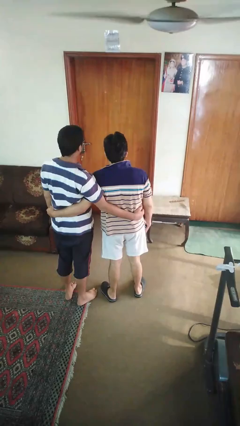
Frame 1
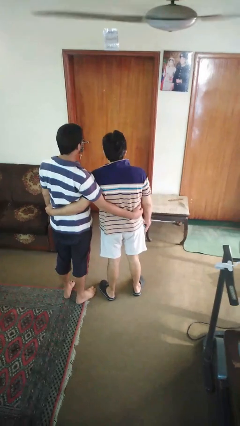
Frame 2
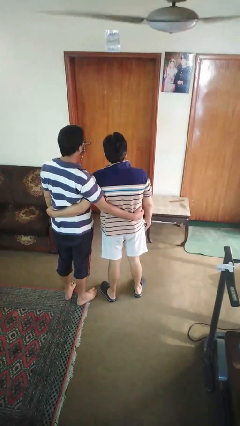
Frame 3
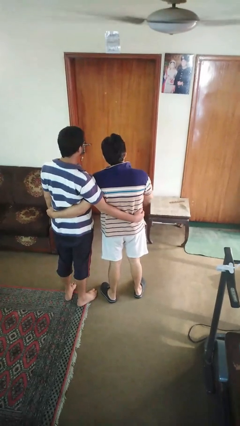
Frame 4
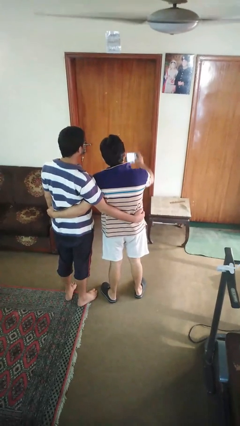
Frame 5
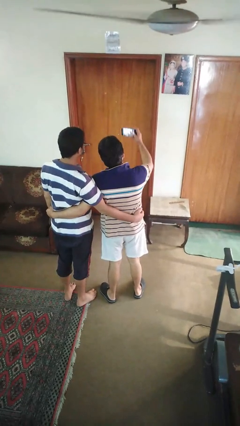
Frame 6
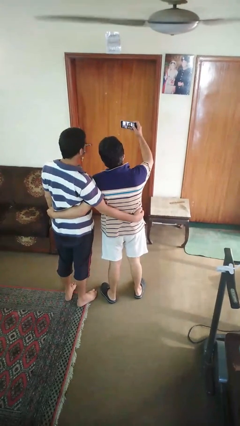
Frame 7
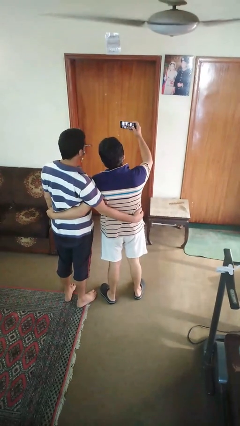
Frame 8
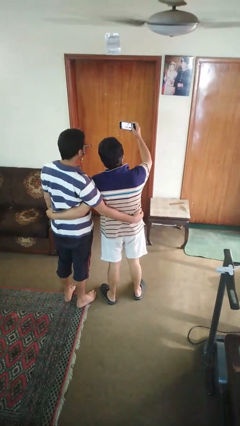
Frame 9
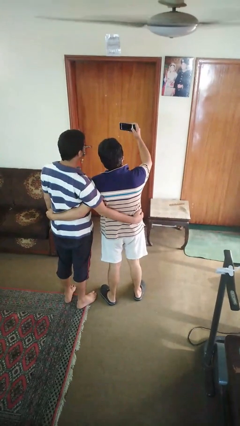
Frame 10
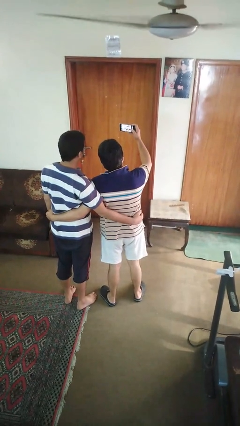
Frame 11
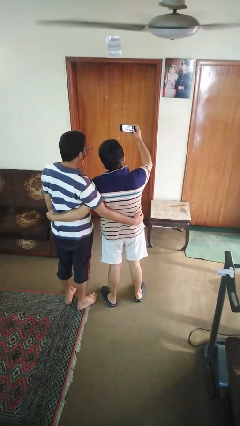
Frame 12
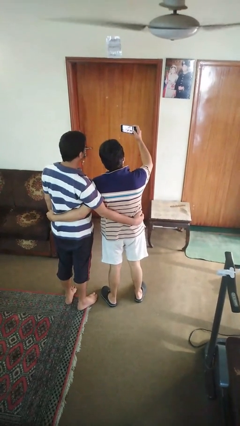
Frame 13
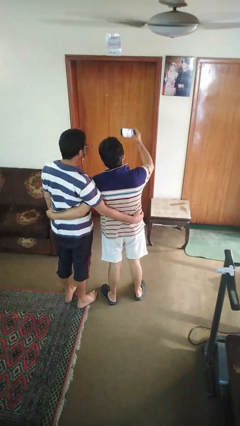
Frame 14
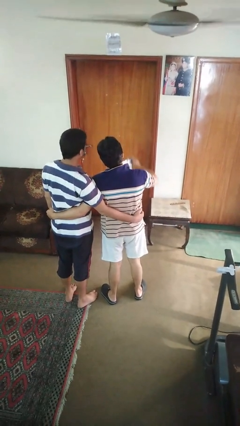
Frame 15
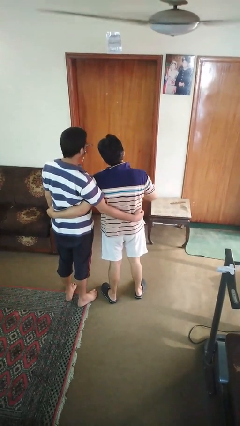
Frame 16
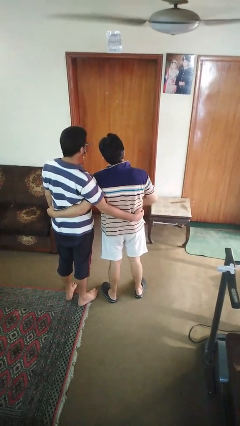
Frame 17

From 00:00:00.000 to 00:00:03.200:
person takes selfie with person

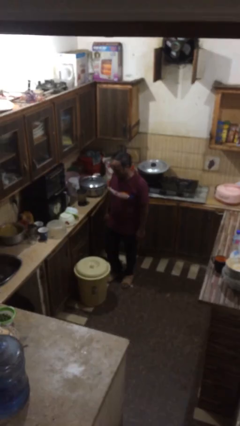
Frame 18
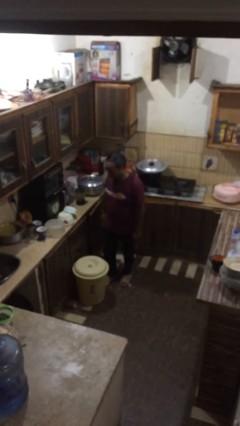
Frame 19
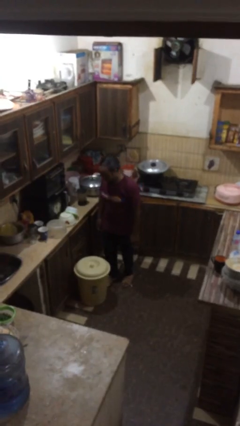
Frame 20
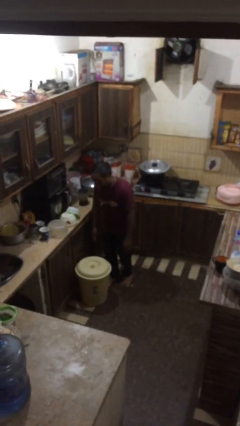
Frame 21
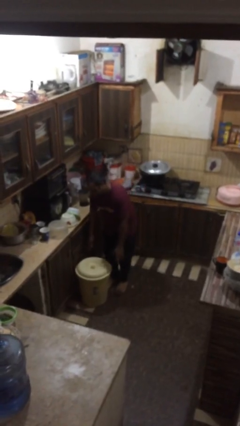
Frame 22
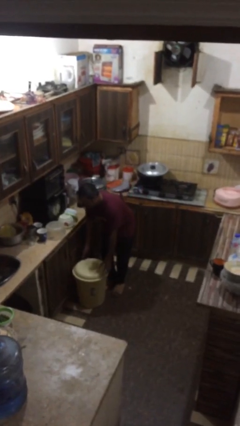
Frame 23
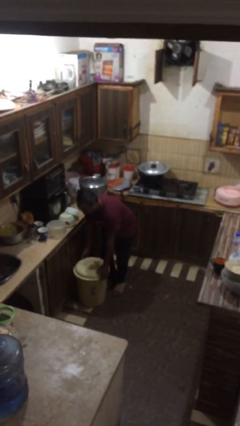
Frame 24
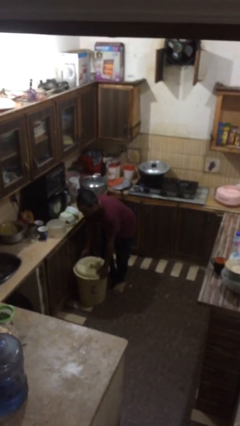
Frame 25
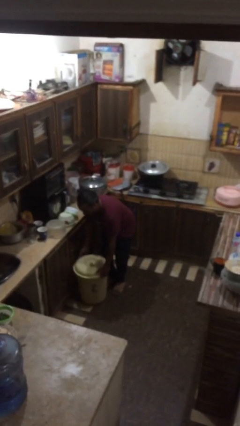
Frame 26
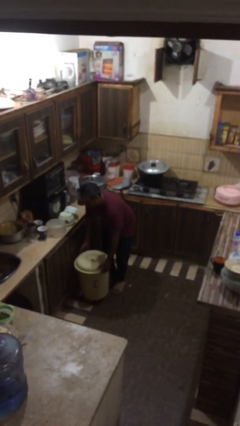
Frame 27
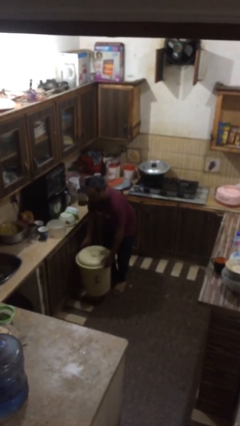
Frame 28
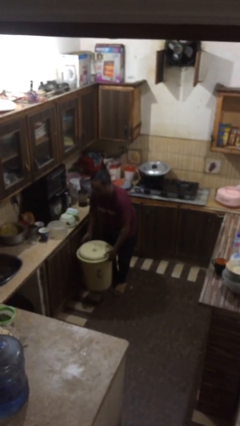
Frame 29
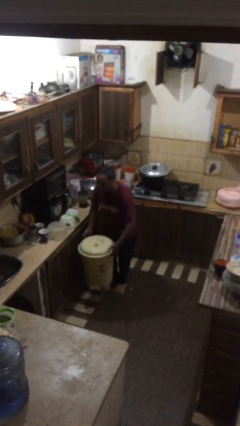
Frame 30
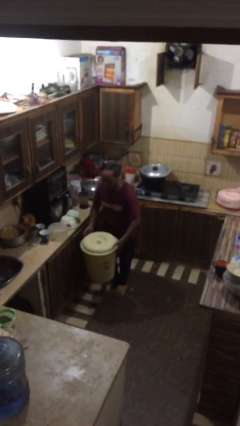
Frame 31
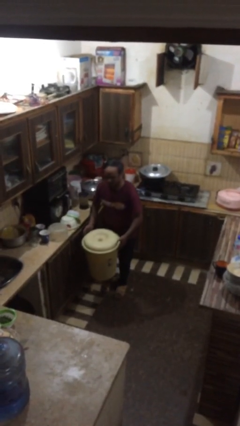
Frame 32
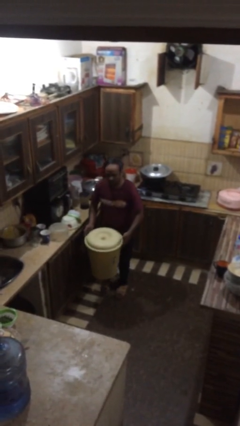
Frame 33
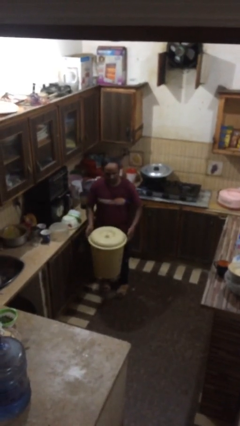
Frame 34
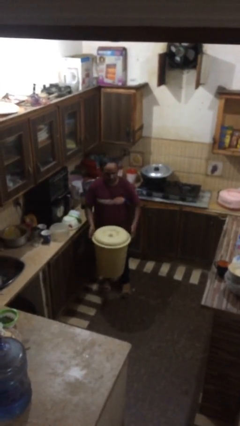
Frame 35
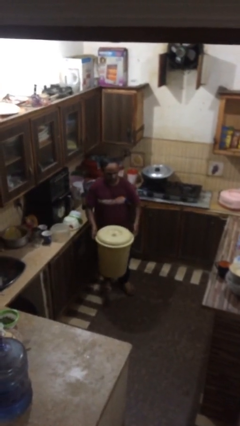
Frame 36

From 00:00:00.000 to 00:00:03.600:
person picks up object from floor

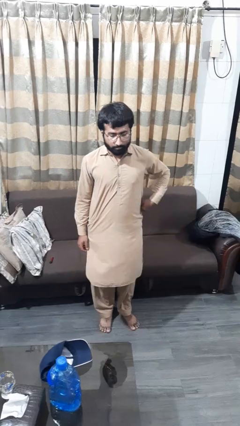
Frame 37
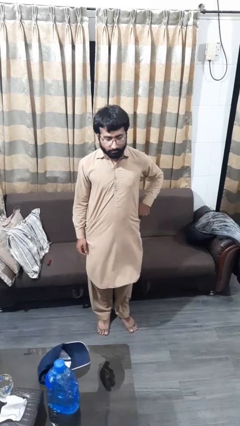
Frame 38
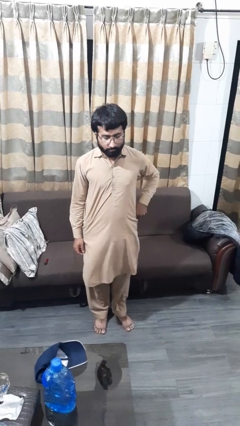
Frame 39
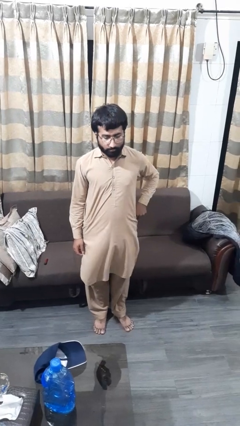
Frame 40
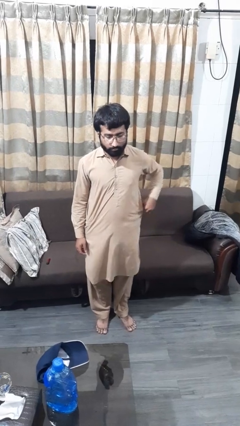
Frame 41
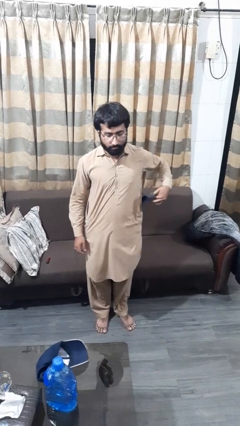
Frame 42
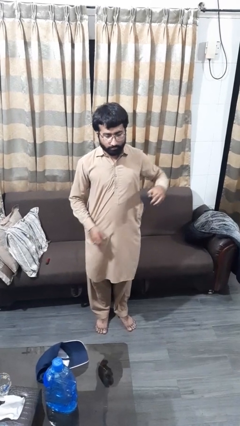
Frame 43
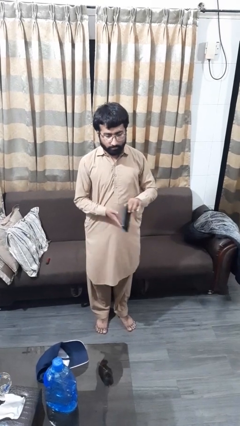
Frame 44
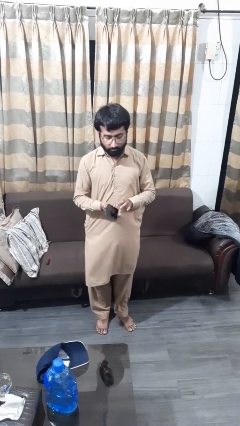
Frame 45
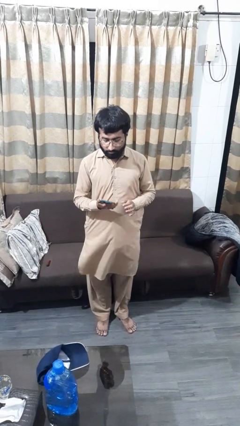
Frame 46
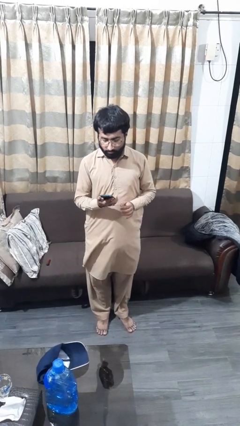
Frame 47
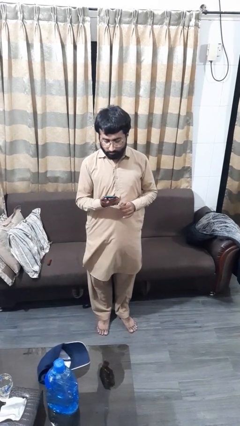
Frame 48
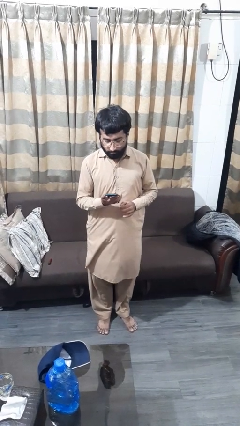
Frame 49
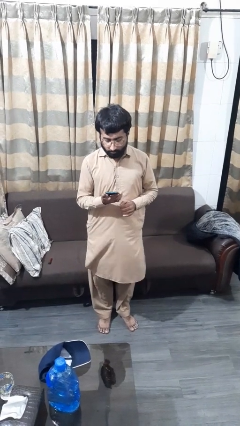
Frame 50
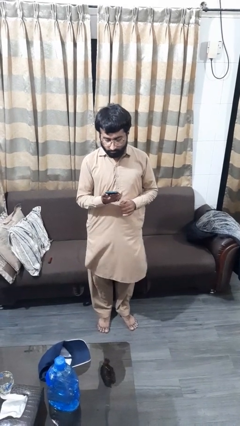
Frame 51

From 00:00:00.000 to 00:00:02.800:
person takes phone from pocket

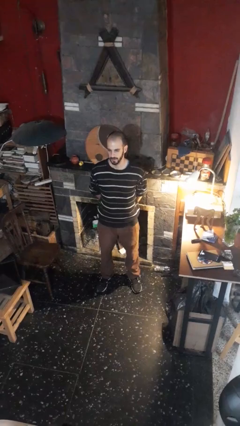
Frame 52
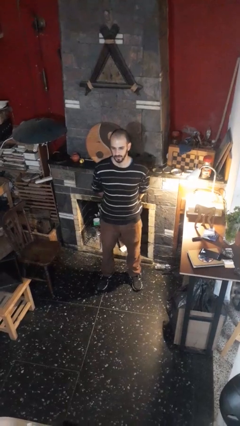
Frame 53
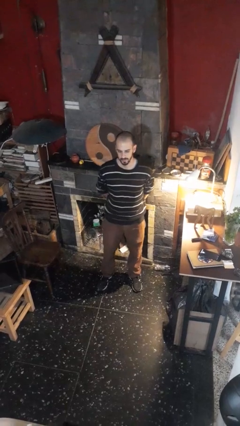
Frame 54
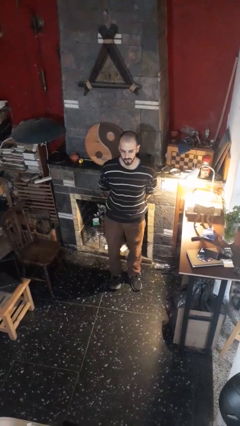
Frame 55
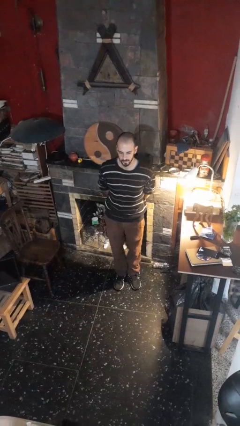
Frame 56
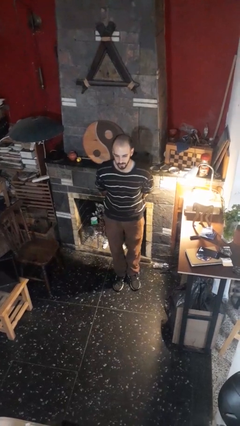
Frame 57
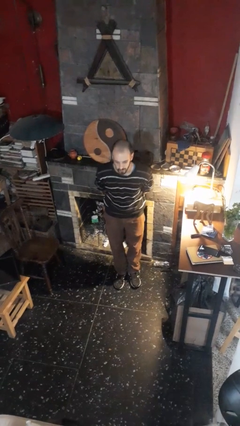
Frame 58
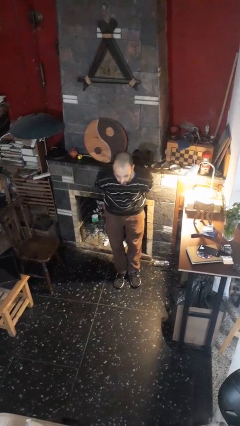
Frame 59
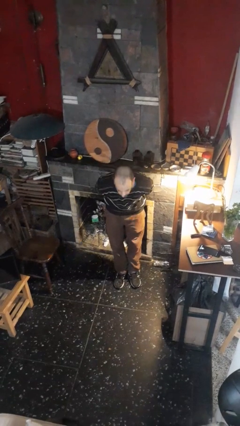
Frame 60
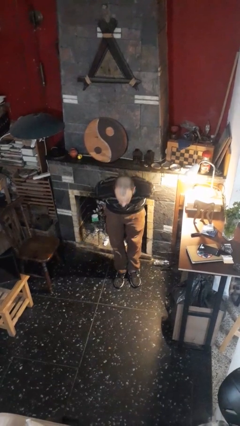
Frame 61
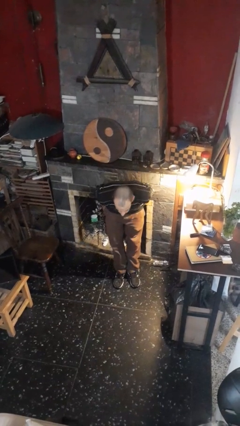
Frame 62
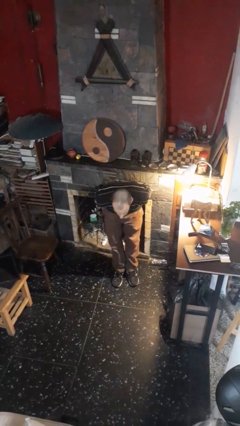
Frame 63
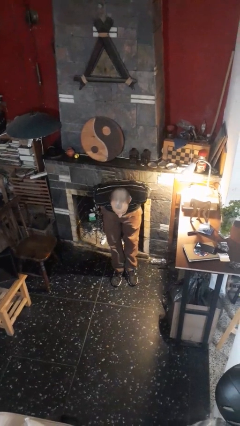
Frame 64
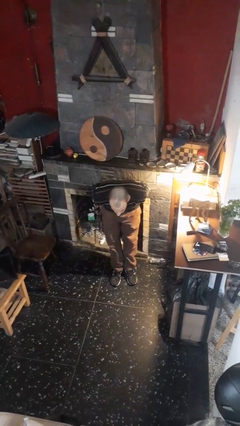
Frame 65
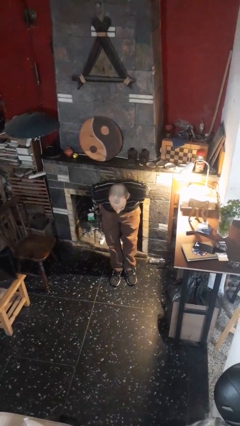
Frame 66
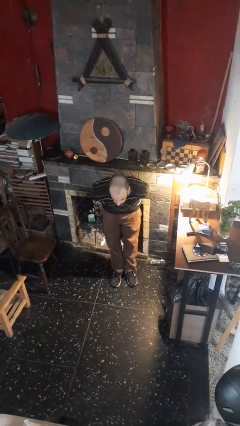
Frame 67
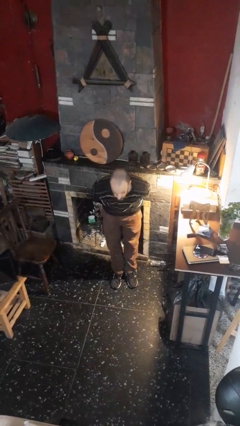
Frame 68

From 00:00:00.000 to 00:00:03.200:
person bows

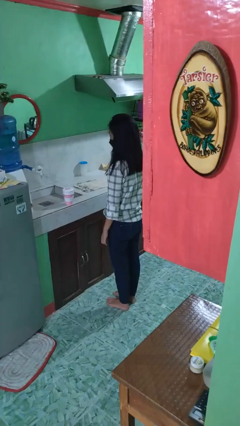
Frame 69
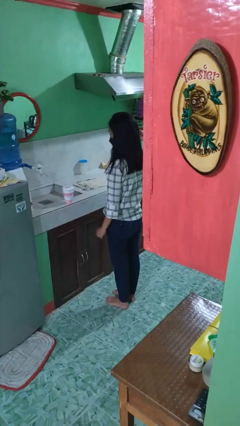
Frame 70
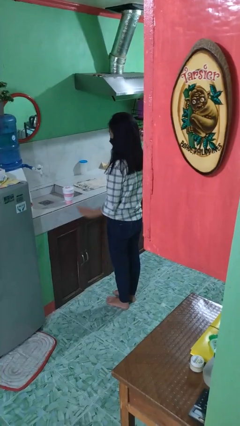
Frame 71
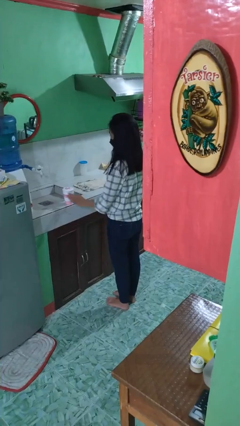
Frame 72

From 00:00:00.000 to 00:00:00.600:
person picks up object from countertop

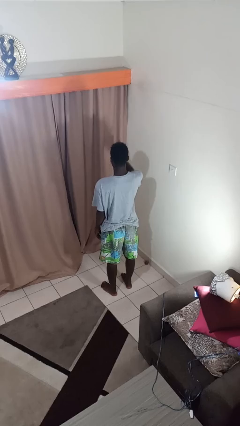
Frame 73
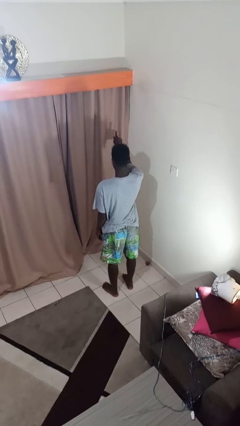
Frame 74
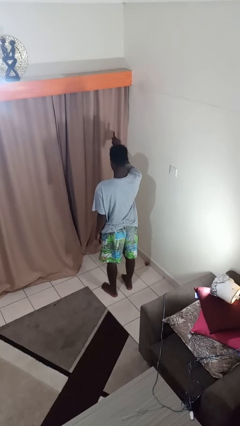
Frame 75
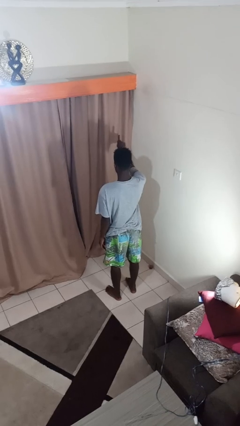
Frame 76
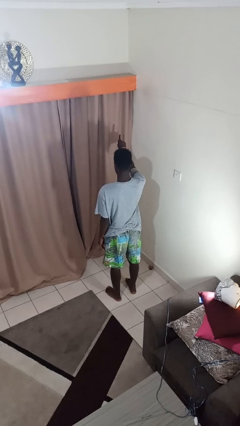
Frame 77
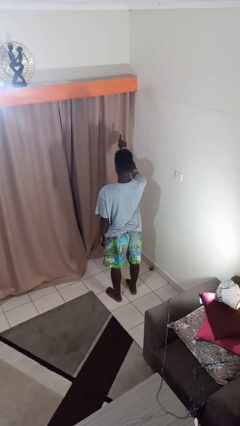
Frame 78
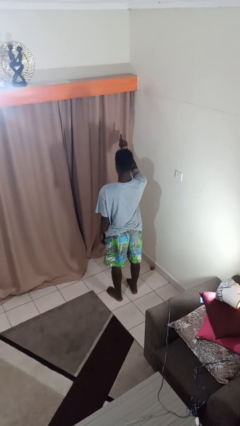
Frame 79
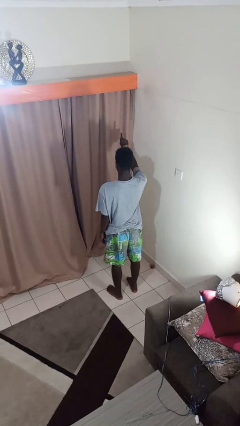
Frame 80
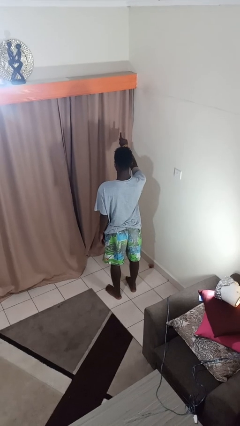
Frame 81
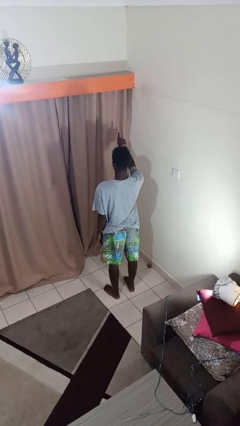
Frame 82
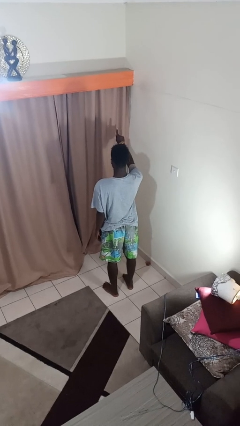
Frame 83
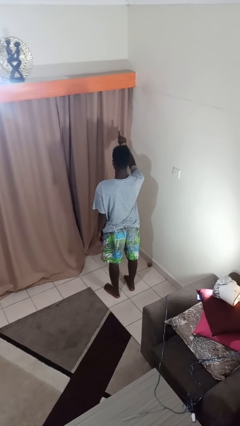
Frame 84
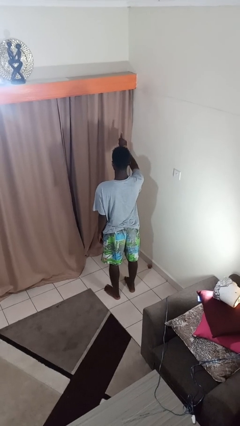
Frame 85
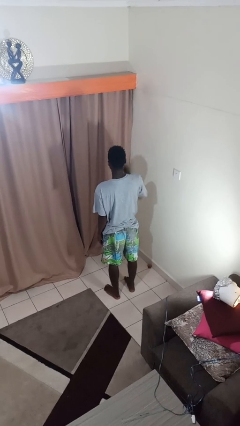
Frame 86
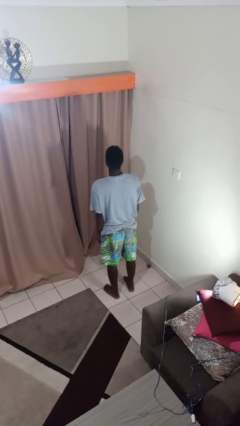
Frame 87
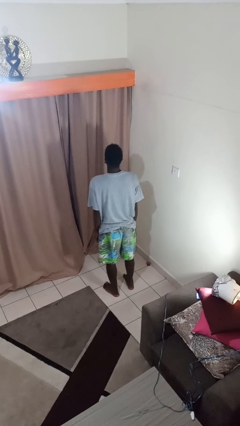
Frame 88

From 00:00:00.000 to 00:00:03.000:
person gestures number one

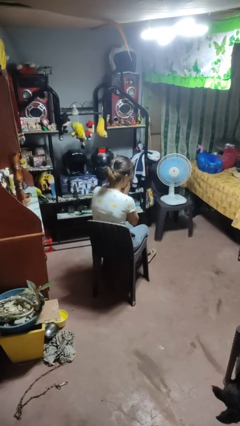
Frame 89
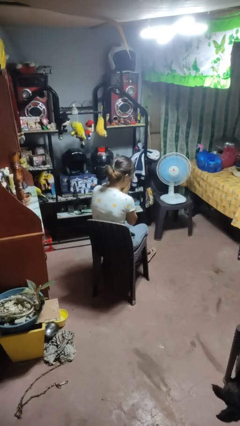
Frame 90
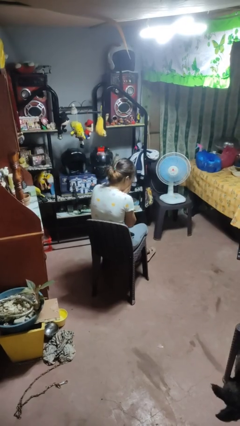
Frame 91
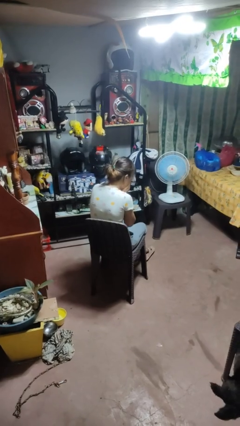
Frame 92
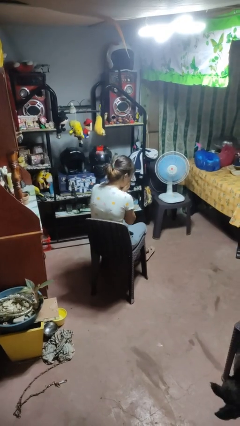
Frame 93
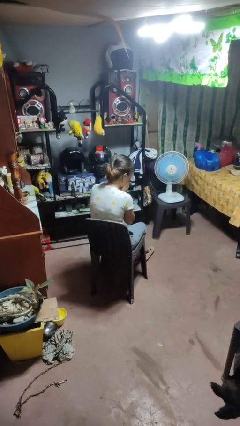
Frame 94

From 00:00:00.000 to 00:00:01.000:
person sneezes into hand
